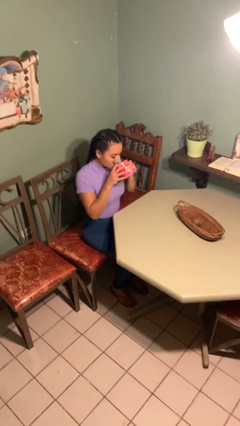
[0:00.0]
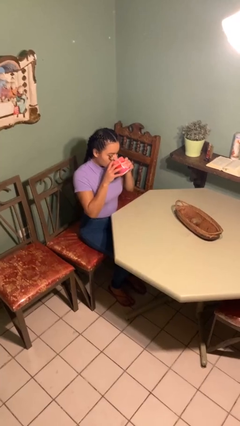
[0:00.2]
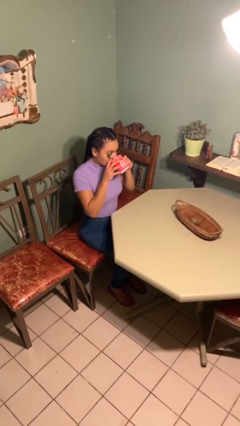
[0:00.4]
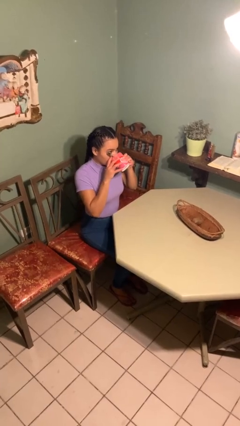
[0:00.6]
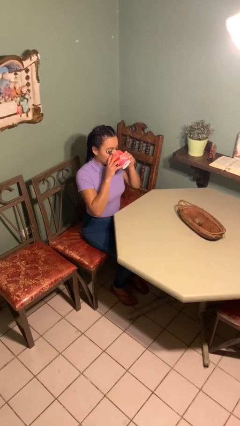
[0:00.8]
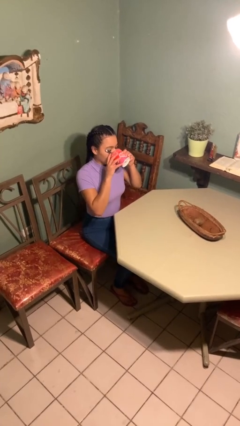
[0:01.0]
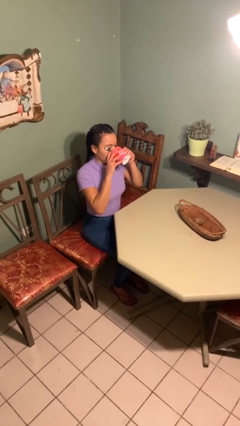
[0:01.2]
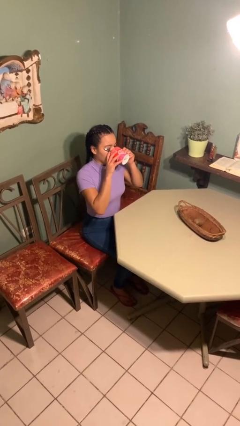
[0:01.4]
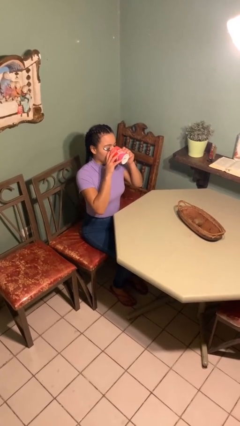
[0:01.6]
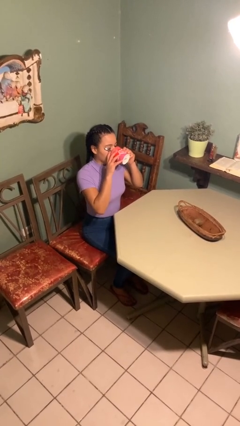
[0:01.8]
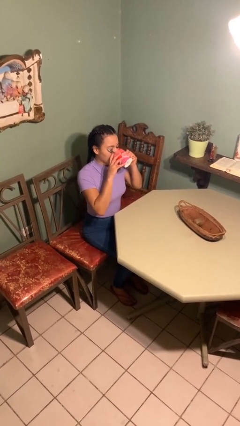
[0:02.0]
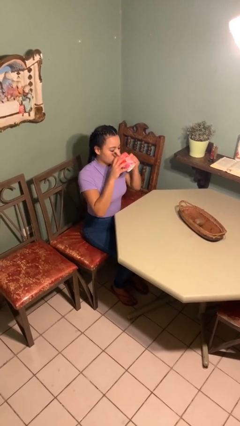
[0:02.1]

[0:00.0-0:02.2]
person drinks from mug

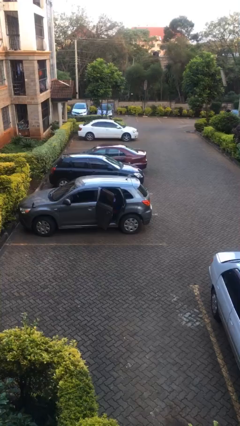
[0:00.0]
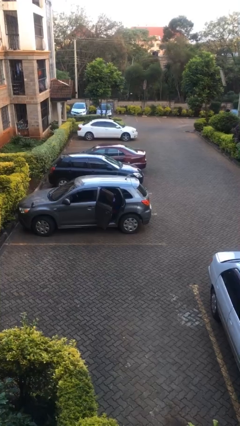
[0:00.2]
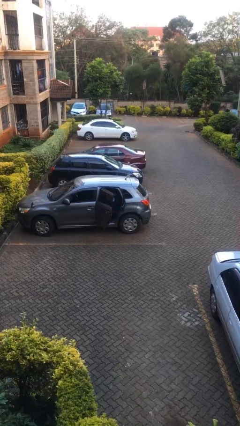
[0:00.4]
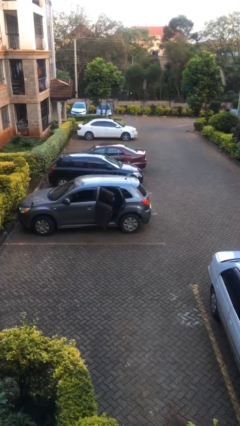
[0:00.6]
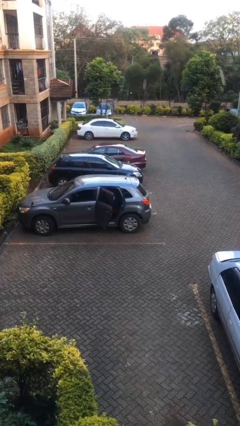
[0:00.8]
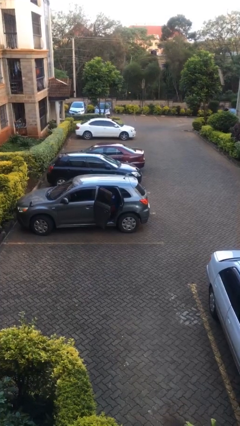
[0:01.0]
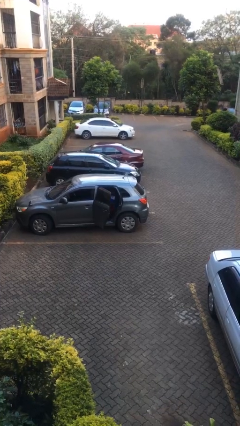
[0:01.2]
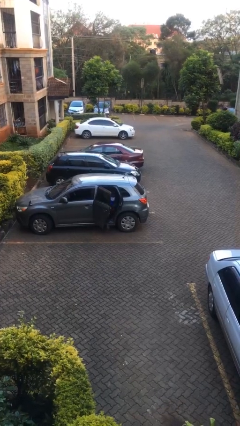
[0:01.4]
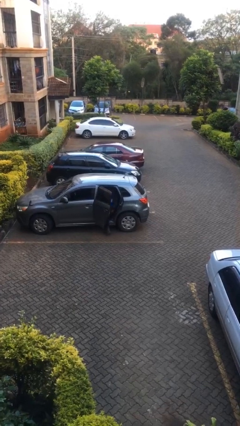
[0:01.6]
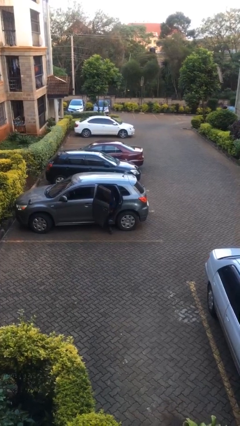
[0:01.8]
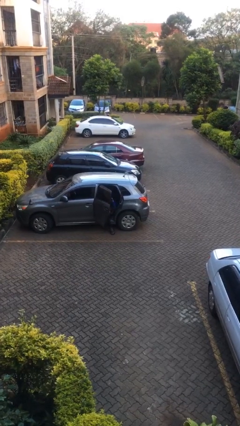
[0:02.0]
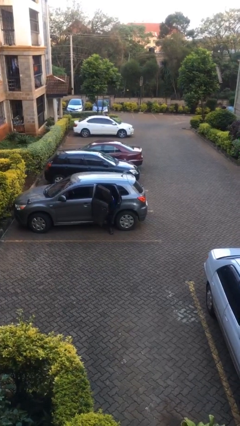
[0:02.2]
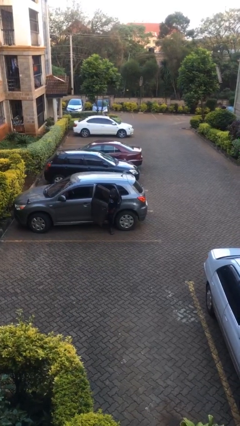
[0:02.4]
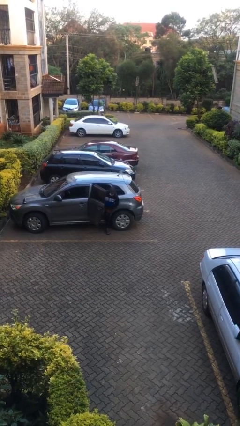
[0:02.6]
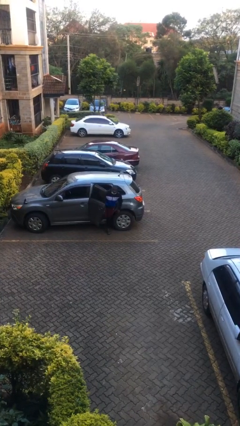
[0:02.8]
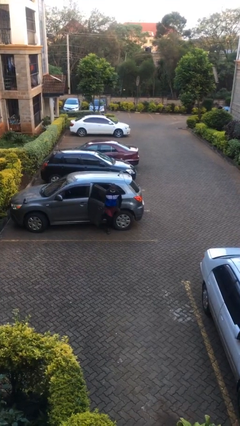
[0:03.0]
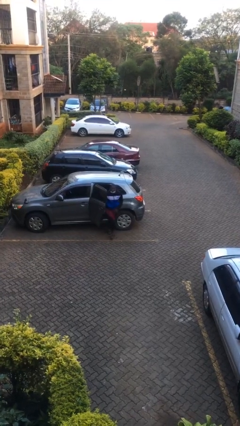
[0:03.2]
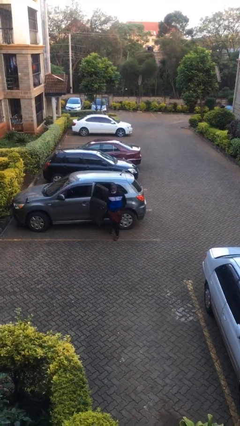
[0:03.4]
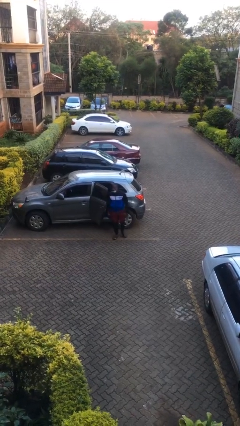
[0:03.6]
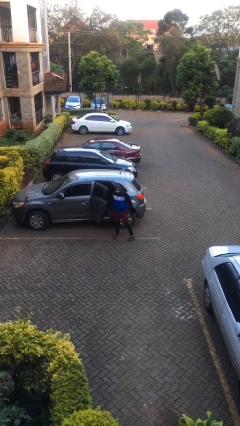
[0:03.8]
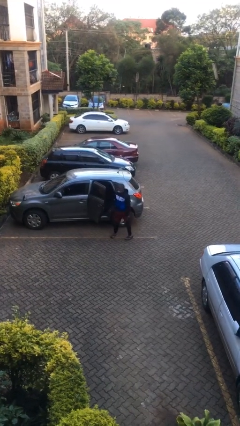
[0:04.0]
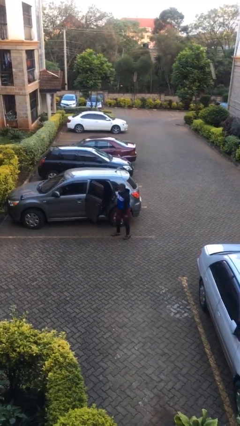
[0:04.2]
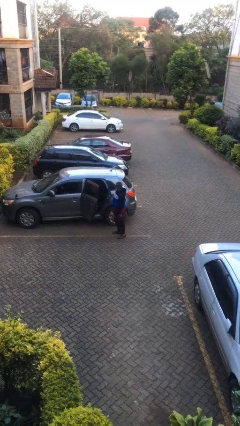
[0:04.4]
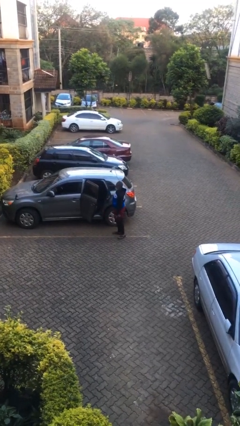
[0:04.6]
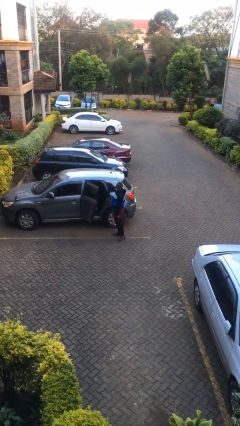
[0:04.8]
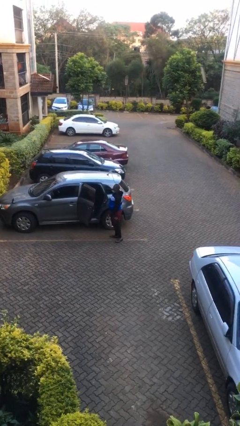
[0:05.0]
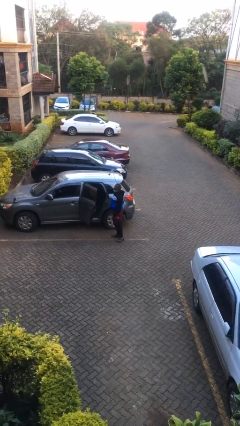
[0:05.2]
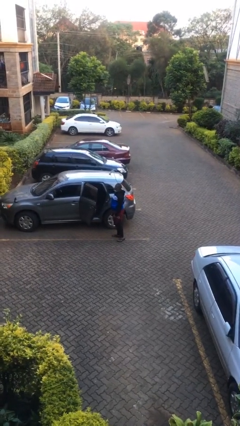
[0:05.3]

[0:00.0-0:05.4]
person exits car

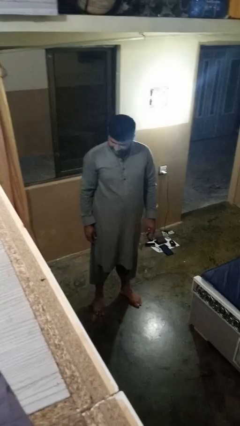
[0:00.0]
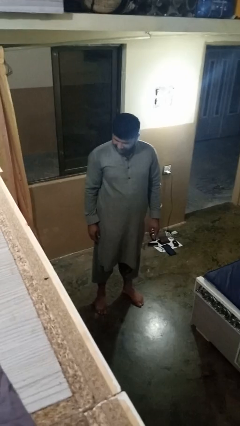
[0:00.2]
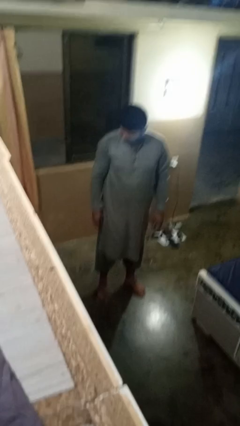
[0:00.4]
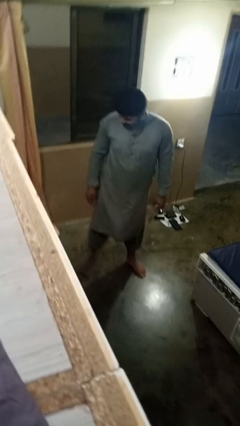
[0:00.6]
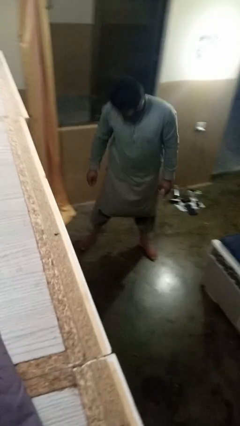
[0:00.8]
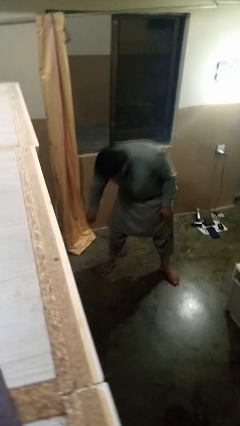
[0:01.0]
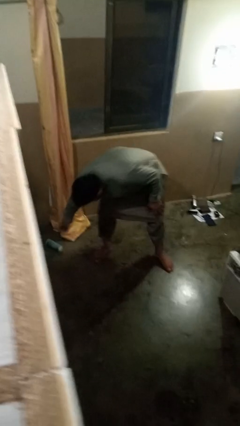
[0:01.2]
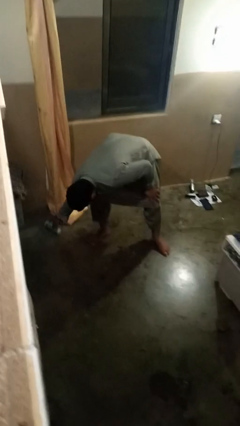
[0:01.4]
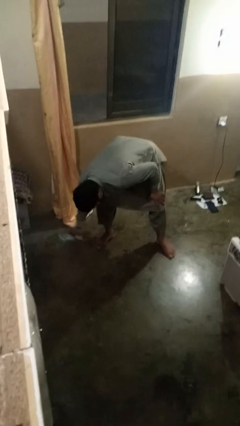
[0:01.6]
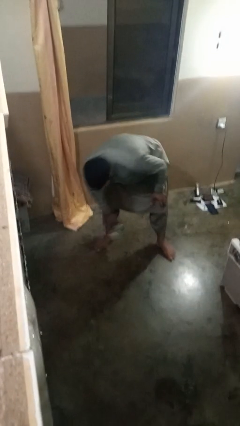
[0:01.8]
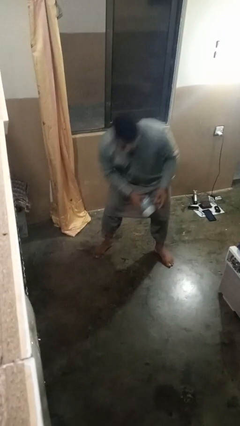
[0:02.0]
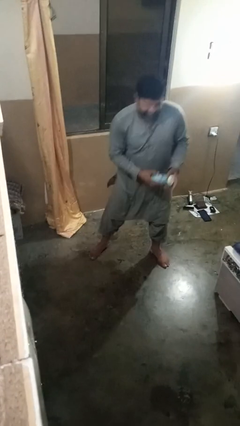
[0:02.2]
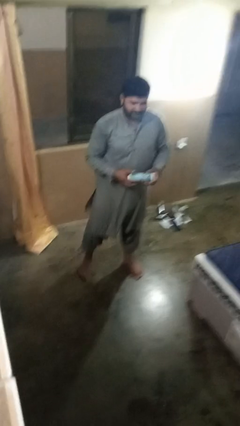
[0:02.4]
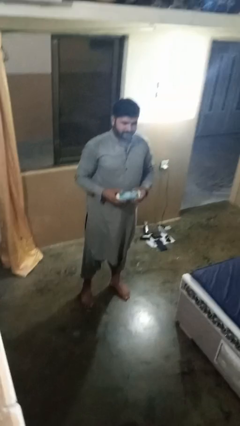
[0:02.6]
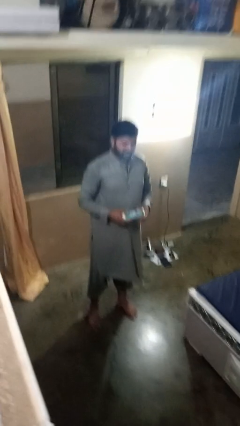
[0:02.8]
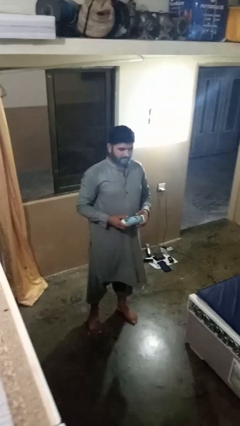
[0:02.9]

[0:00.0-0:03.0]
person picks up object from floor

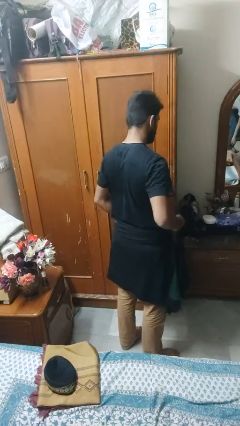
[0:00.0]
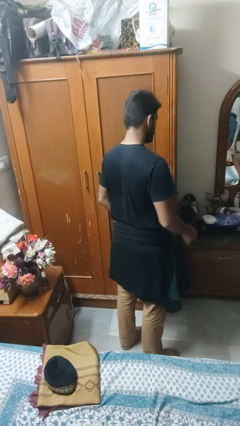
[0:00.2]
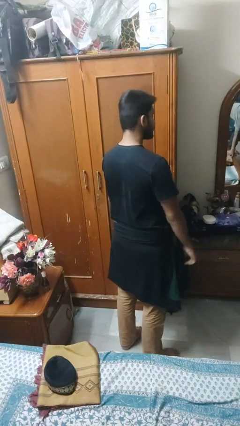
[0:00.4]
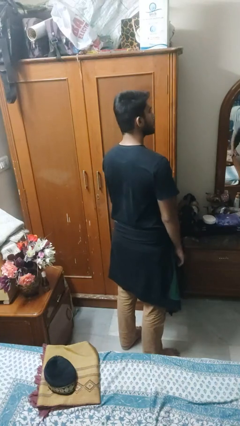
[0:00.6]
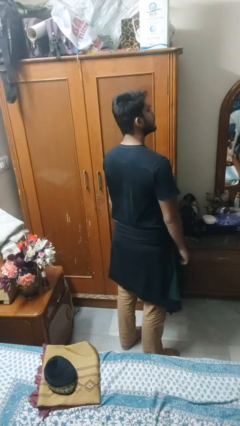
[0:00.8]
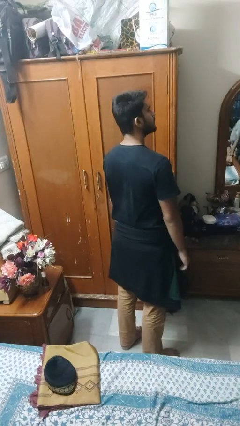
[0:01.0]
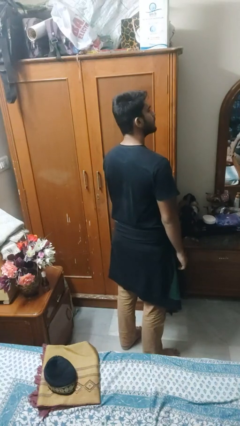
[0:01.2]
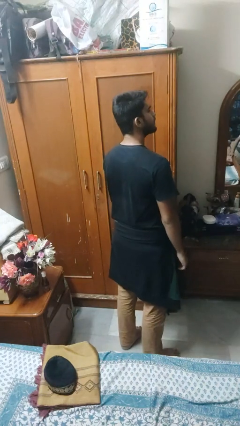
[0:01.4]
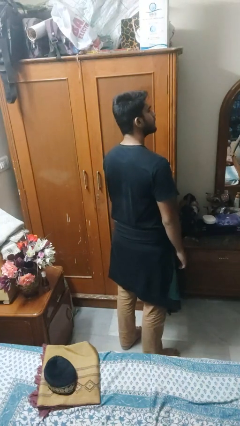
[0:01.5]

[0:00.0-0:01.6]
person unties jacket around waist

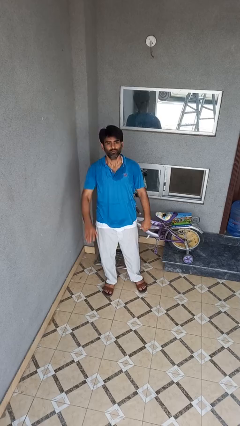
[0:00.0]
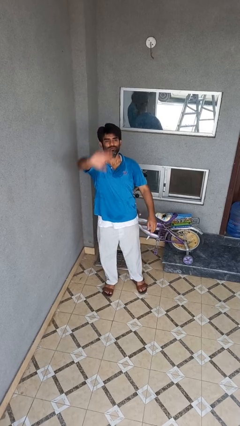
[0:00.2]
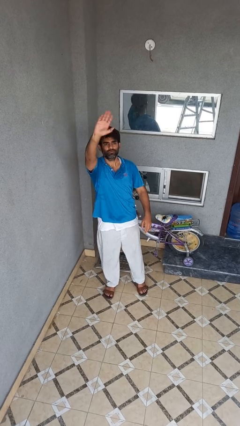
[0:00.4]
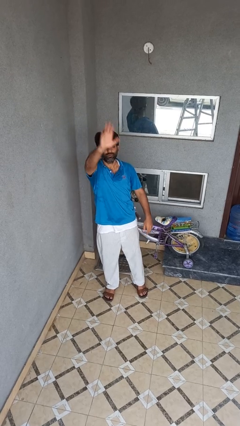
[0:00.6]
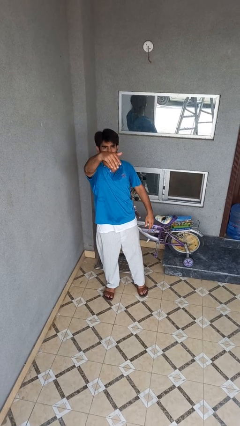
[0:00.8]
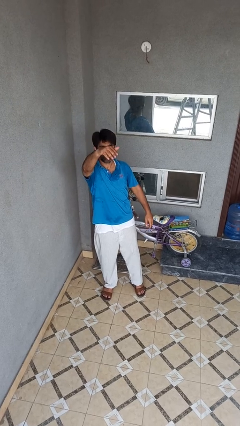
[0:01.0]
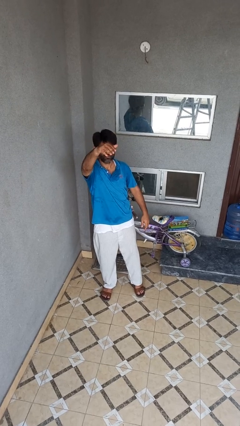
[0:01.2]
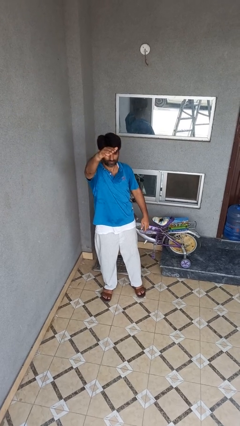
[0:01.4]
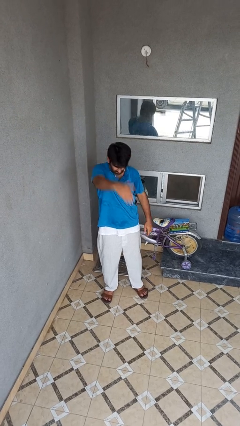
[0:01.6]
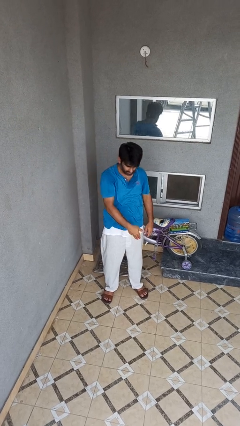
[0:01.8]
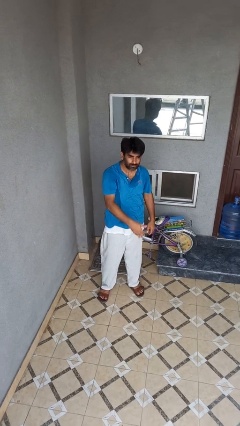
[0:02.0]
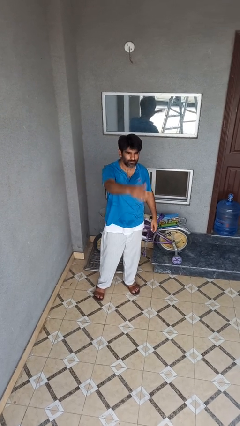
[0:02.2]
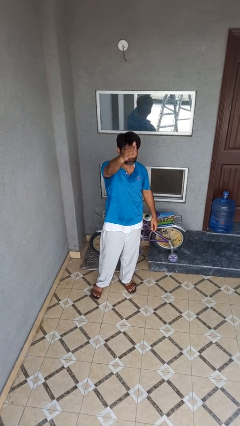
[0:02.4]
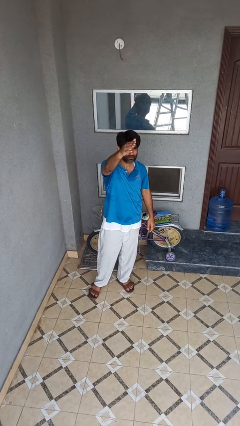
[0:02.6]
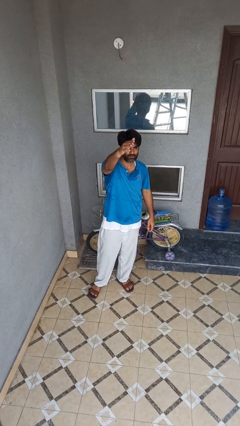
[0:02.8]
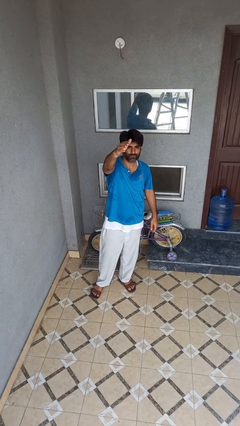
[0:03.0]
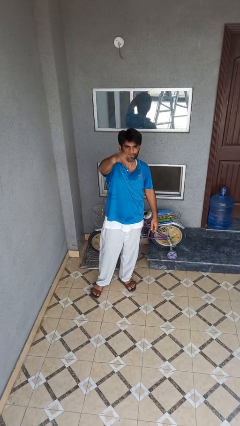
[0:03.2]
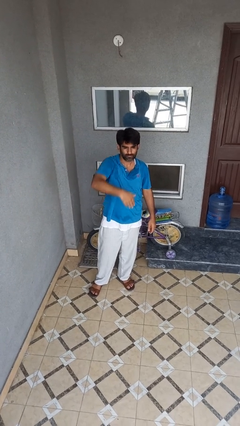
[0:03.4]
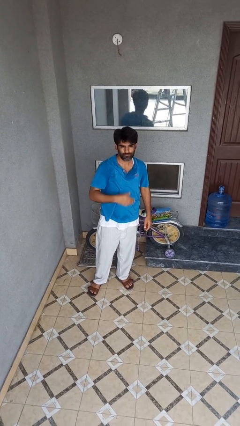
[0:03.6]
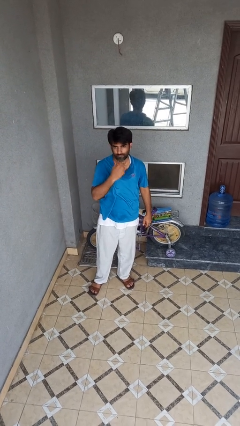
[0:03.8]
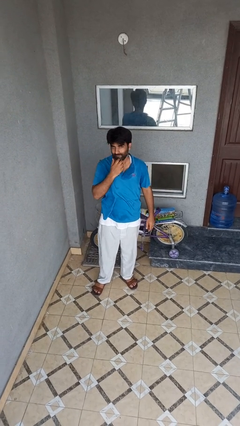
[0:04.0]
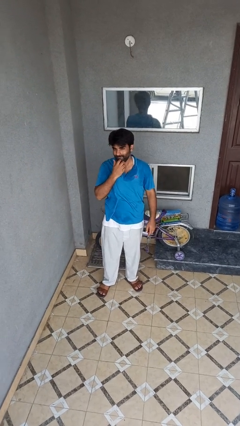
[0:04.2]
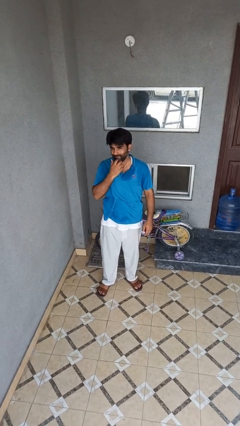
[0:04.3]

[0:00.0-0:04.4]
person gestures come here

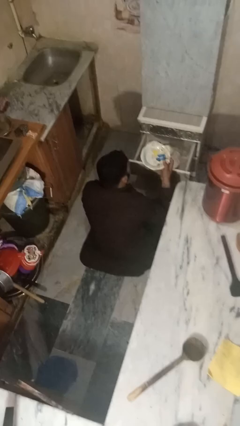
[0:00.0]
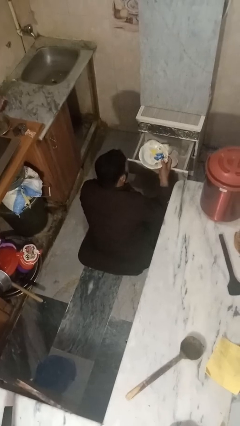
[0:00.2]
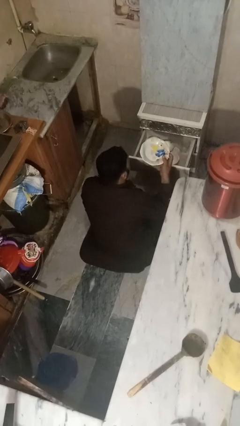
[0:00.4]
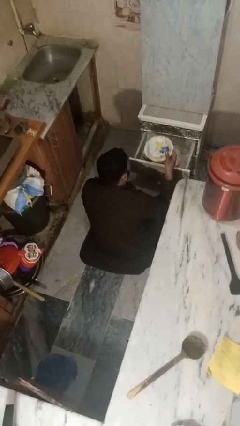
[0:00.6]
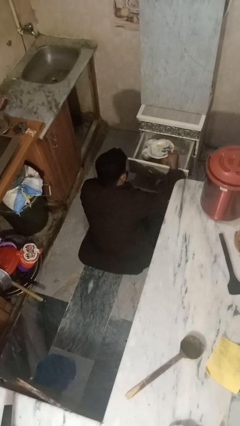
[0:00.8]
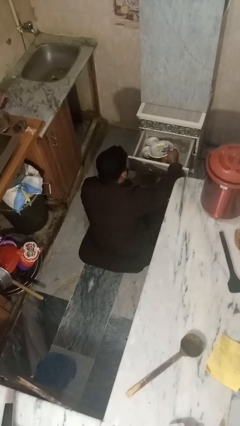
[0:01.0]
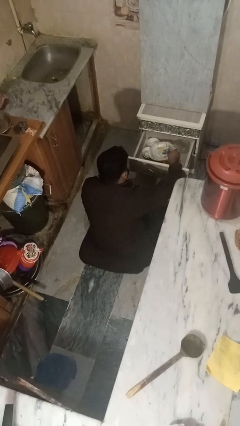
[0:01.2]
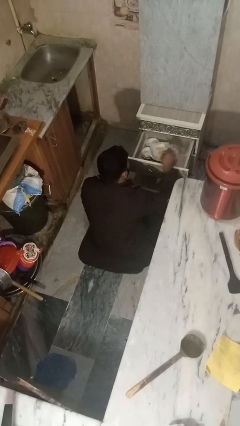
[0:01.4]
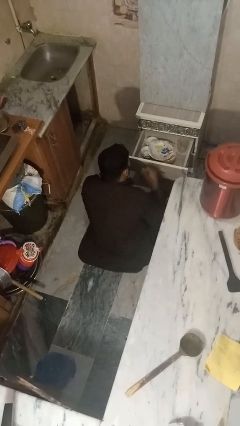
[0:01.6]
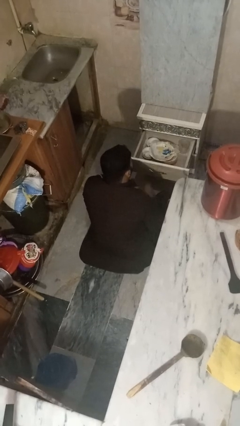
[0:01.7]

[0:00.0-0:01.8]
person puts object into kitchen drawer
